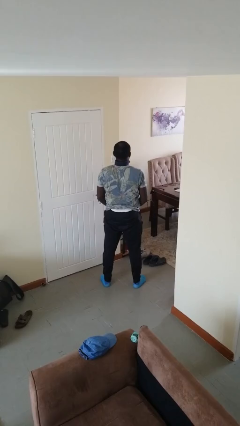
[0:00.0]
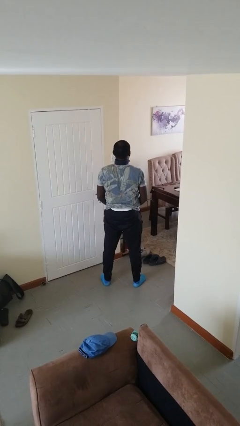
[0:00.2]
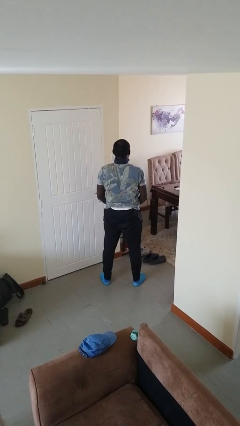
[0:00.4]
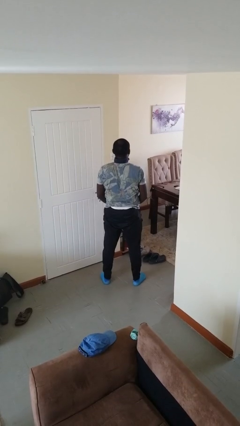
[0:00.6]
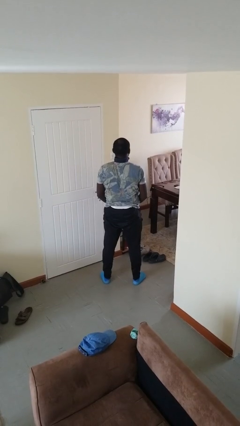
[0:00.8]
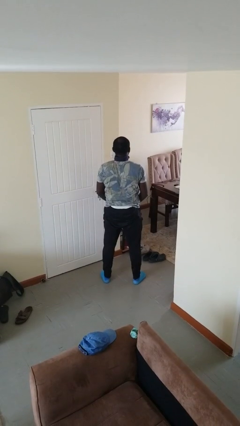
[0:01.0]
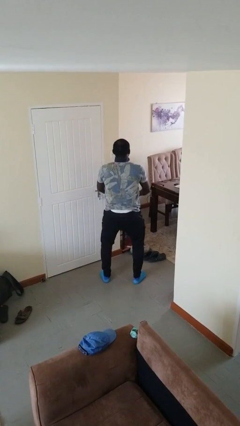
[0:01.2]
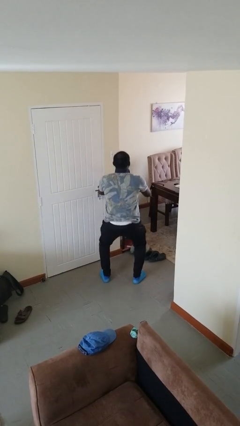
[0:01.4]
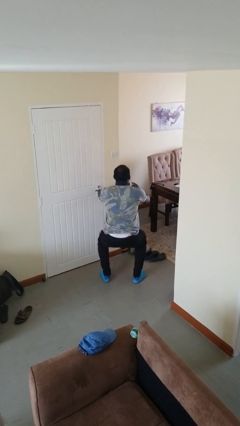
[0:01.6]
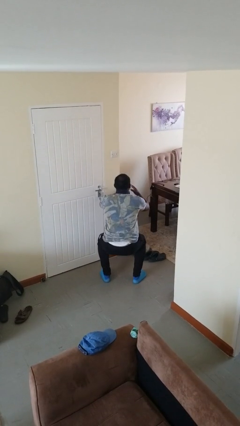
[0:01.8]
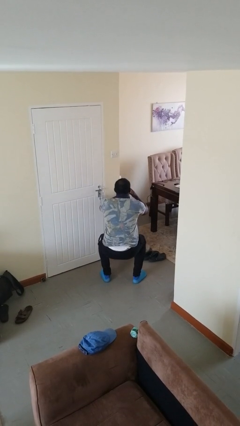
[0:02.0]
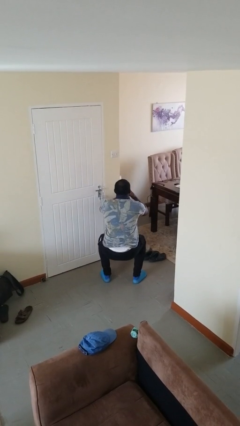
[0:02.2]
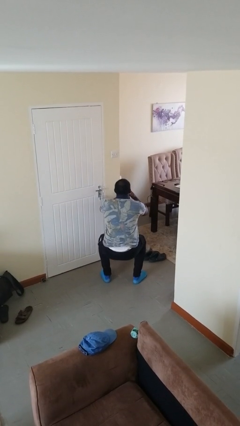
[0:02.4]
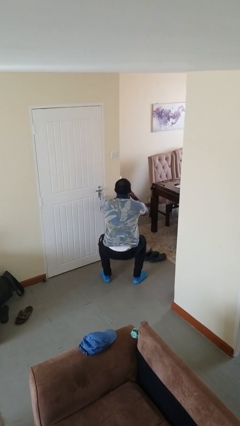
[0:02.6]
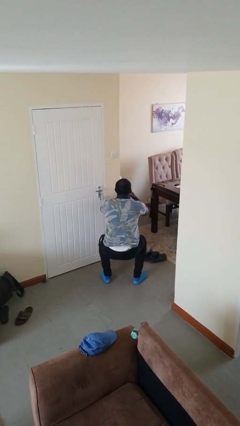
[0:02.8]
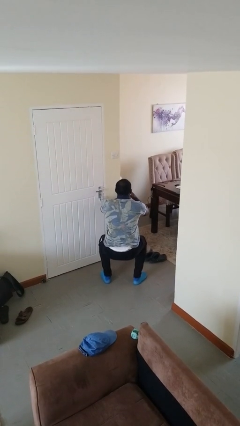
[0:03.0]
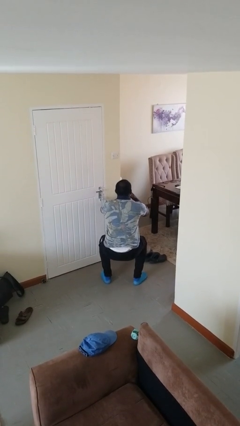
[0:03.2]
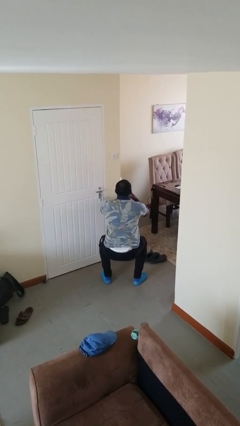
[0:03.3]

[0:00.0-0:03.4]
person squats

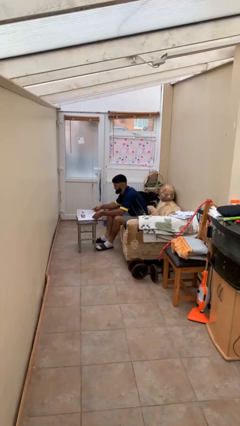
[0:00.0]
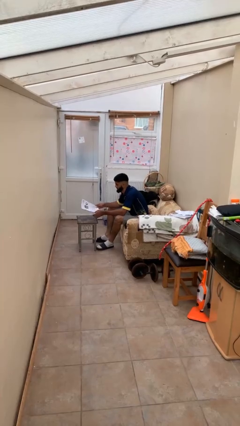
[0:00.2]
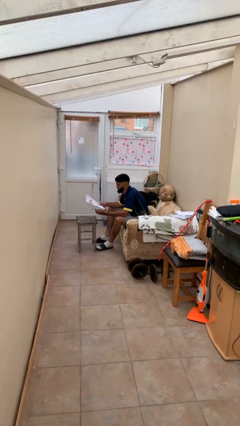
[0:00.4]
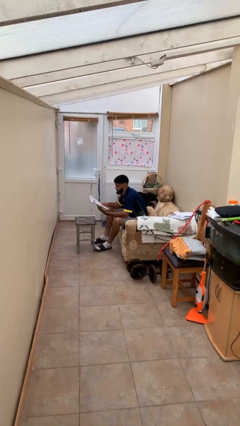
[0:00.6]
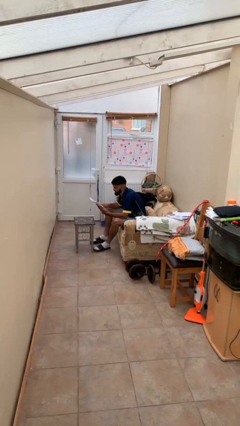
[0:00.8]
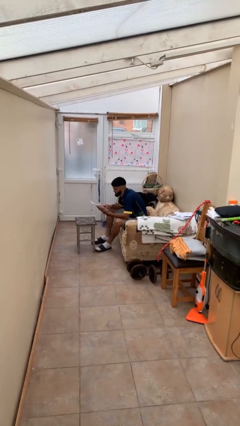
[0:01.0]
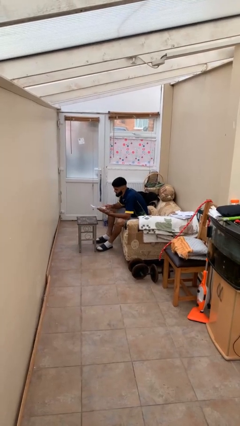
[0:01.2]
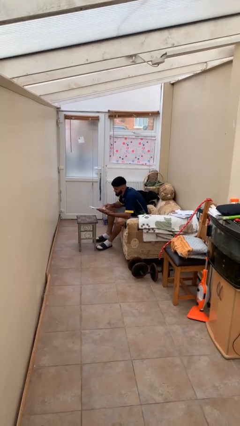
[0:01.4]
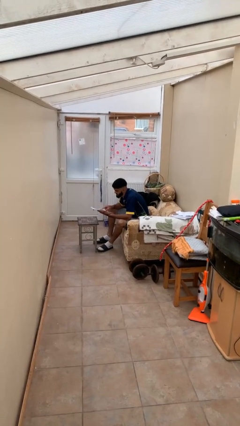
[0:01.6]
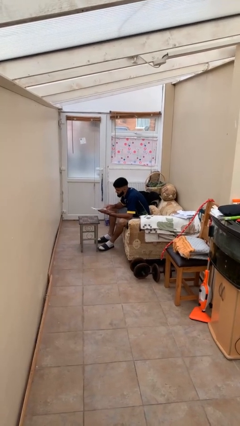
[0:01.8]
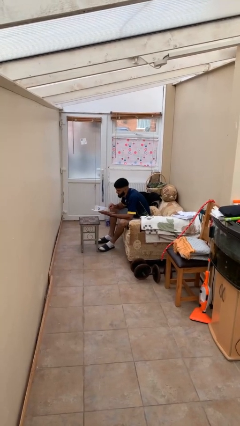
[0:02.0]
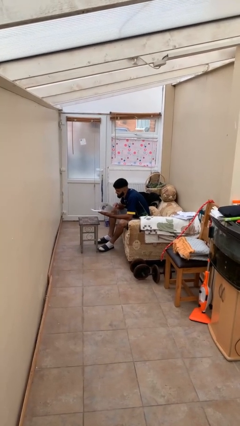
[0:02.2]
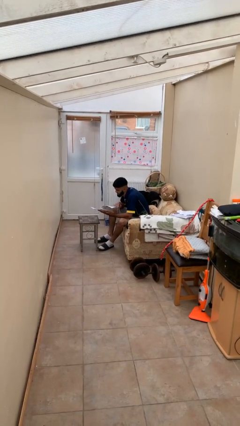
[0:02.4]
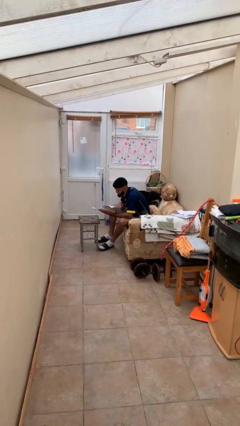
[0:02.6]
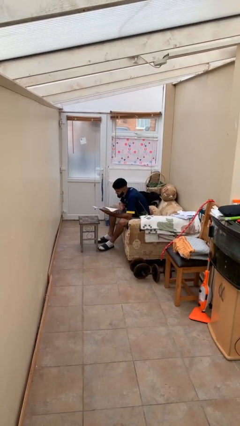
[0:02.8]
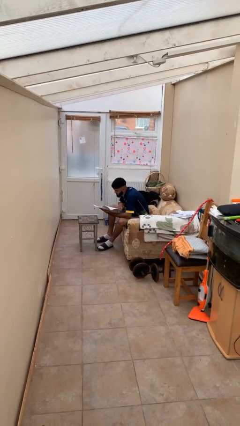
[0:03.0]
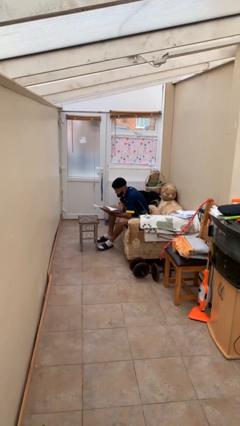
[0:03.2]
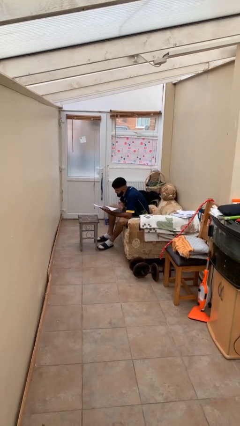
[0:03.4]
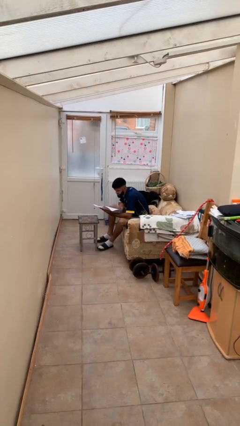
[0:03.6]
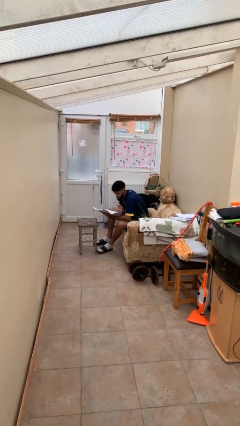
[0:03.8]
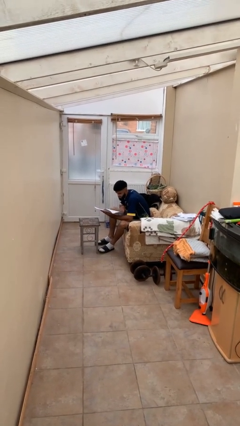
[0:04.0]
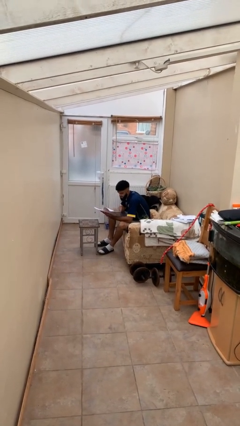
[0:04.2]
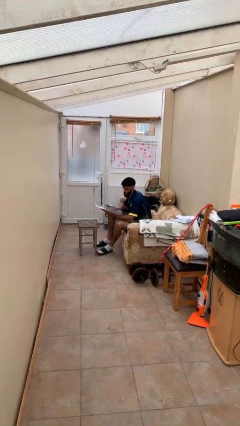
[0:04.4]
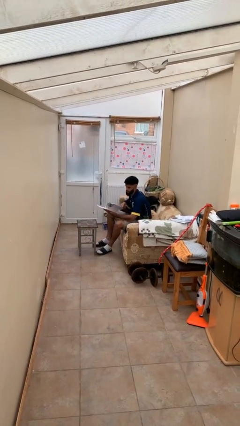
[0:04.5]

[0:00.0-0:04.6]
person reads document

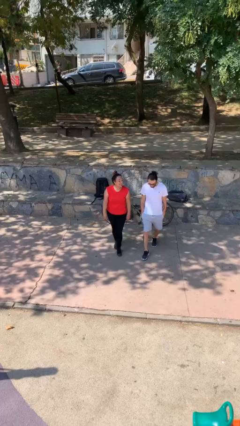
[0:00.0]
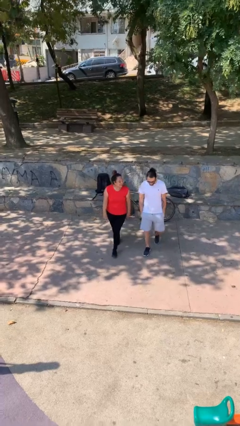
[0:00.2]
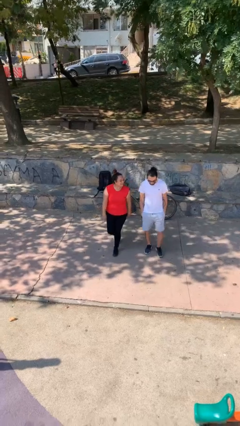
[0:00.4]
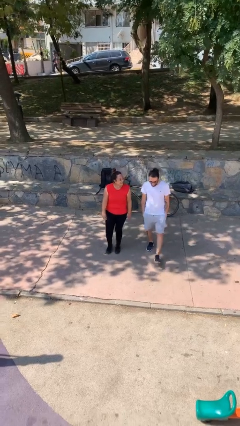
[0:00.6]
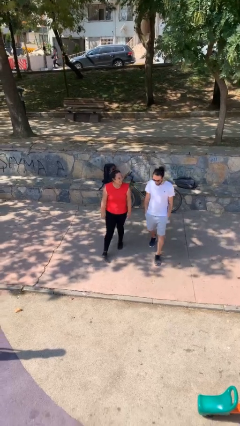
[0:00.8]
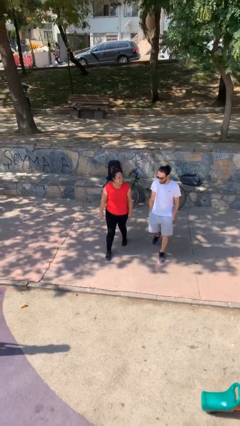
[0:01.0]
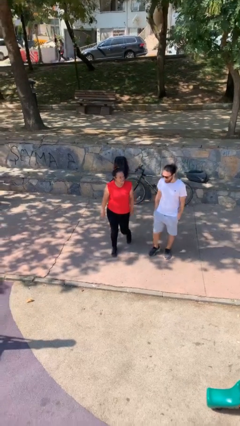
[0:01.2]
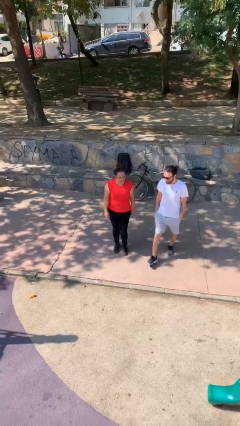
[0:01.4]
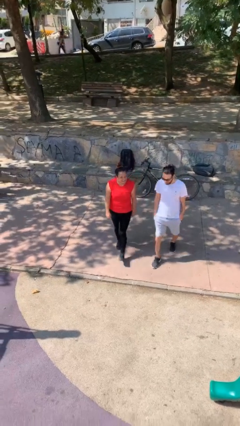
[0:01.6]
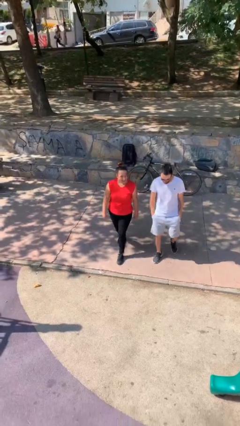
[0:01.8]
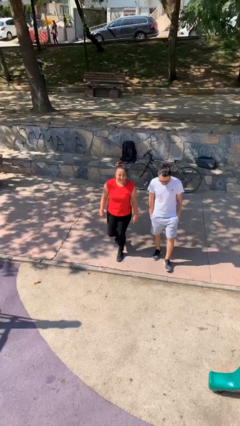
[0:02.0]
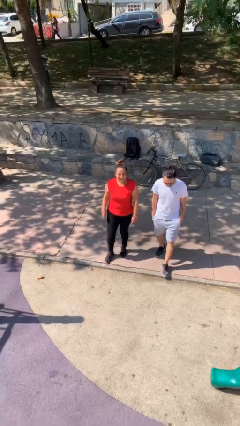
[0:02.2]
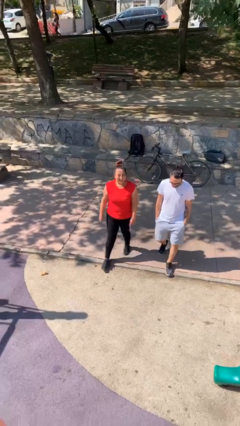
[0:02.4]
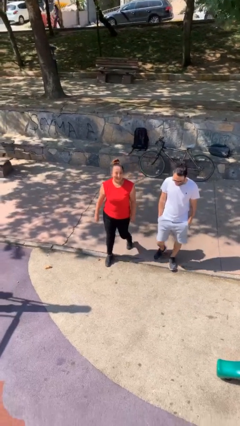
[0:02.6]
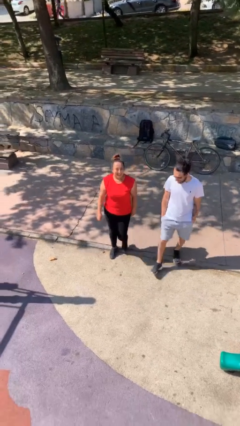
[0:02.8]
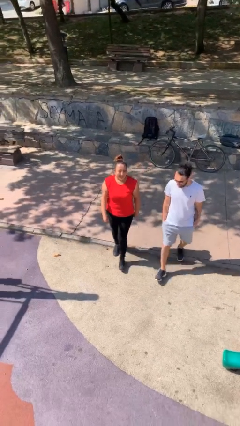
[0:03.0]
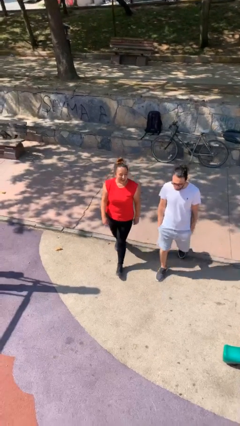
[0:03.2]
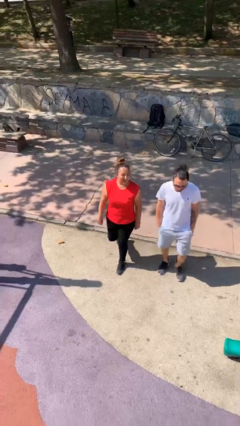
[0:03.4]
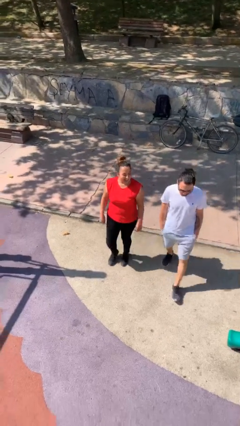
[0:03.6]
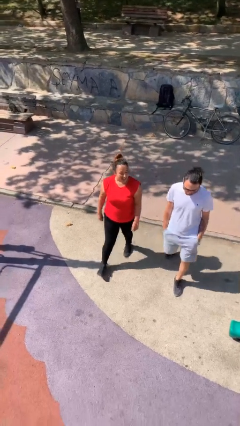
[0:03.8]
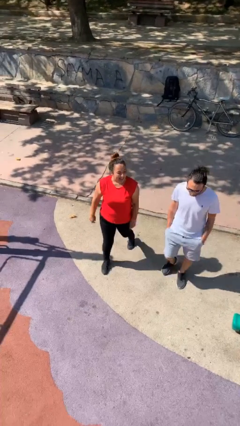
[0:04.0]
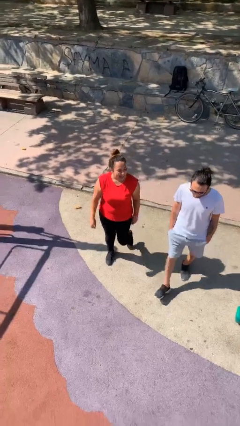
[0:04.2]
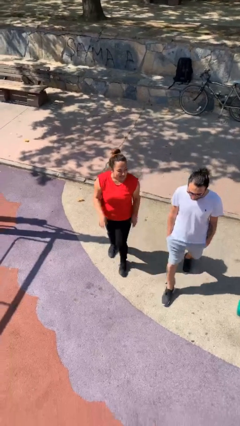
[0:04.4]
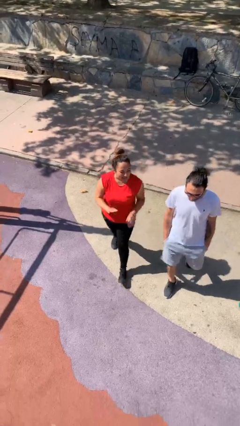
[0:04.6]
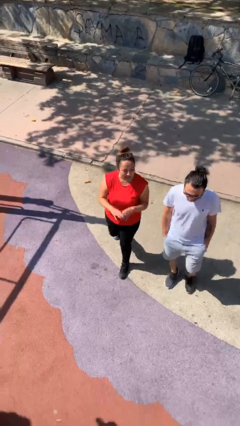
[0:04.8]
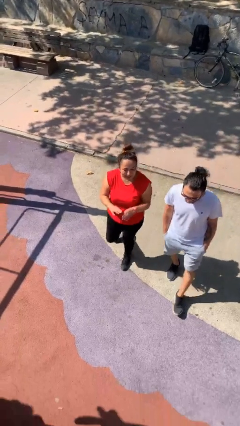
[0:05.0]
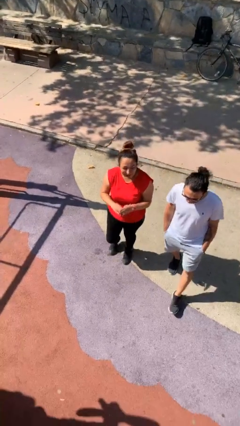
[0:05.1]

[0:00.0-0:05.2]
person talks to person

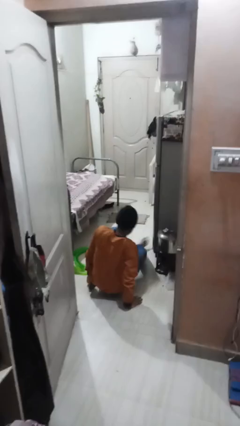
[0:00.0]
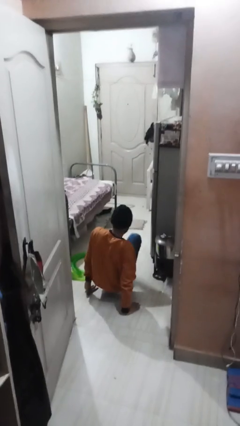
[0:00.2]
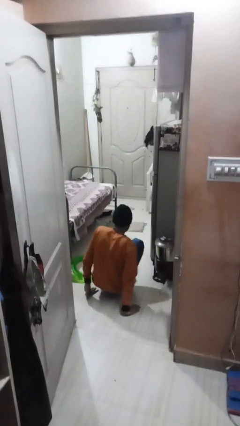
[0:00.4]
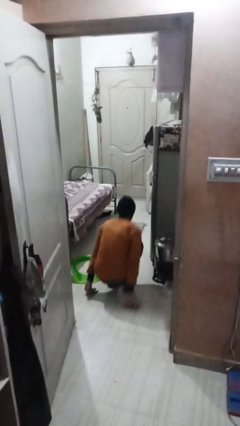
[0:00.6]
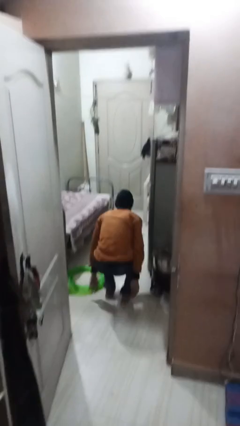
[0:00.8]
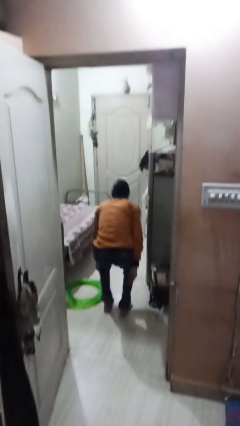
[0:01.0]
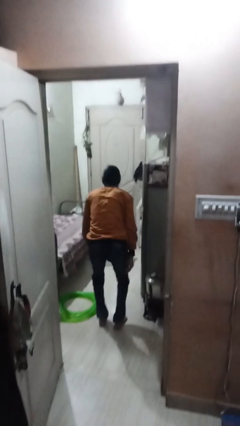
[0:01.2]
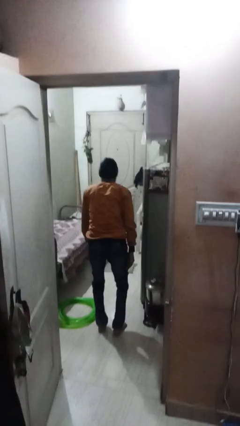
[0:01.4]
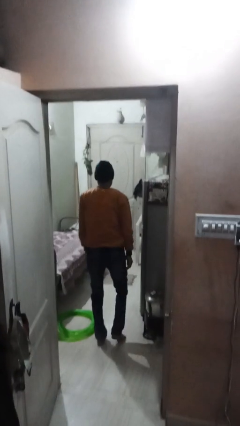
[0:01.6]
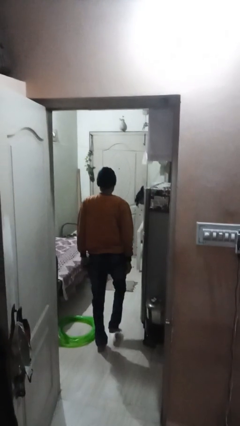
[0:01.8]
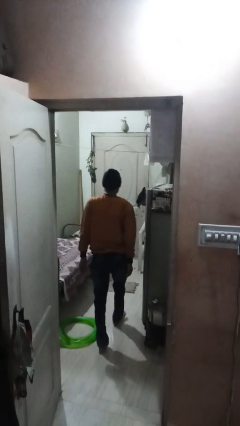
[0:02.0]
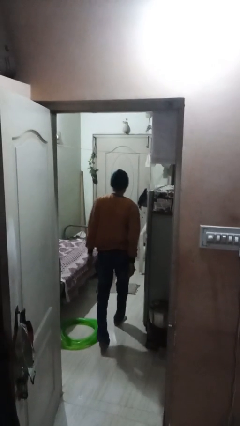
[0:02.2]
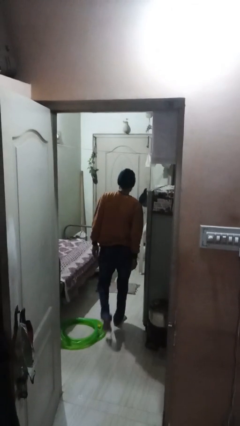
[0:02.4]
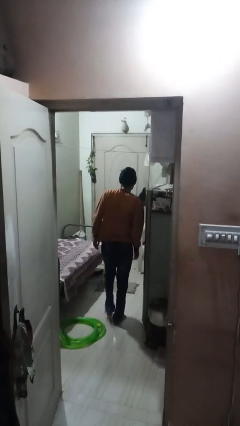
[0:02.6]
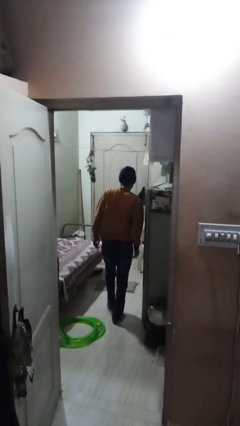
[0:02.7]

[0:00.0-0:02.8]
person stands up from floor

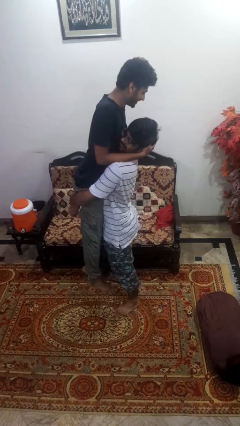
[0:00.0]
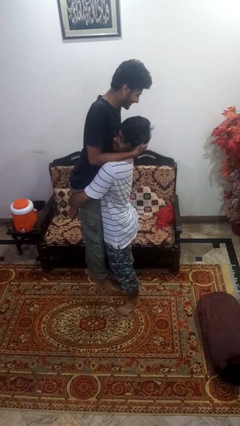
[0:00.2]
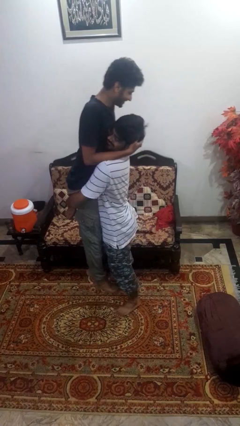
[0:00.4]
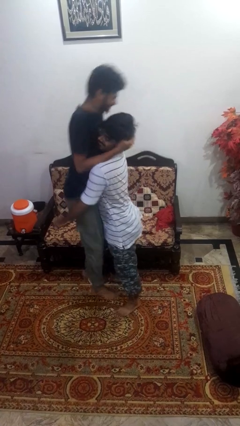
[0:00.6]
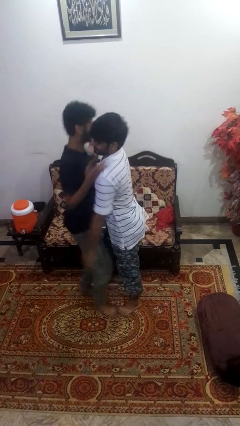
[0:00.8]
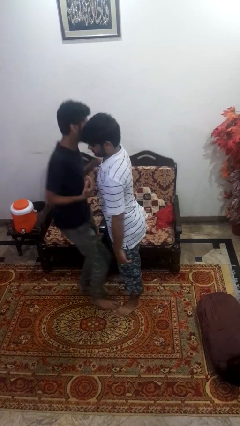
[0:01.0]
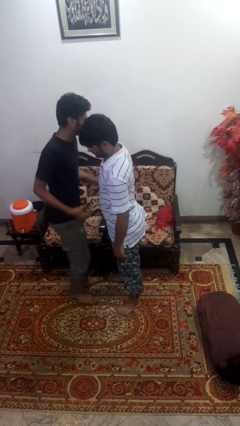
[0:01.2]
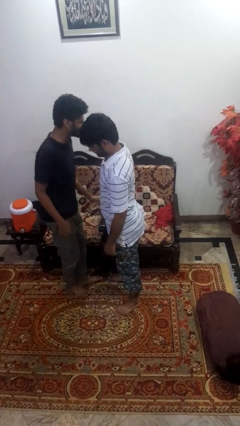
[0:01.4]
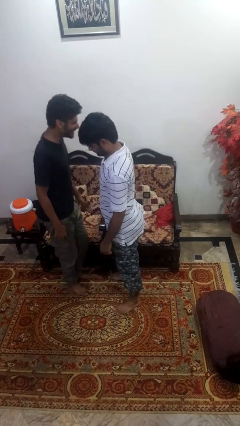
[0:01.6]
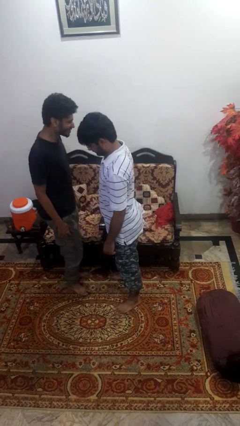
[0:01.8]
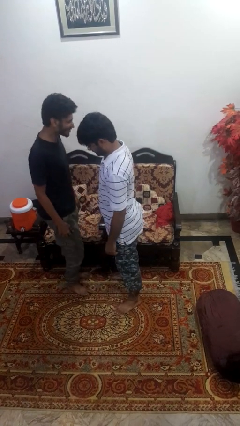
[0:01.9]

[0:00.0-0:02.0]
person puts down person
